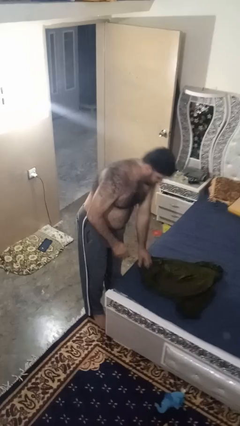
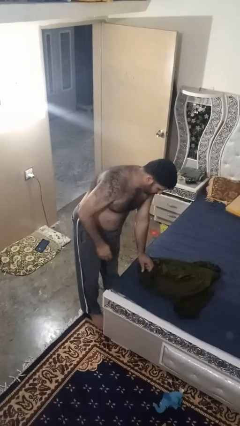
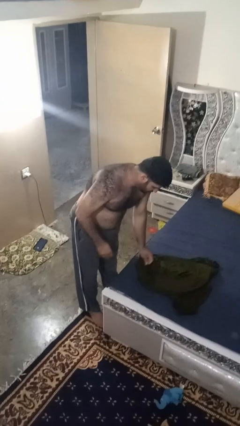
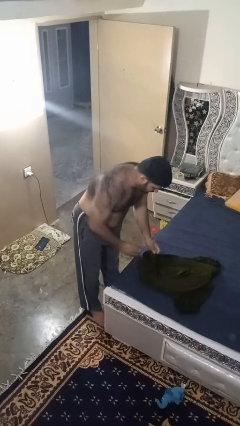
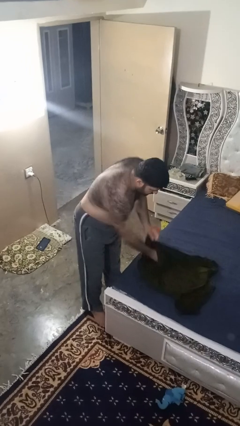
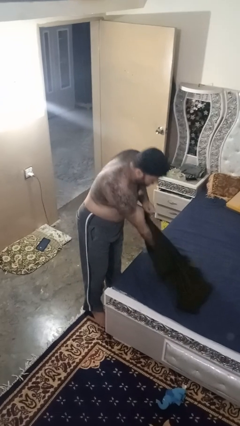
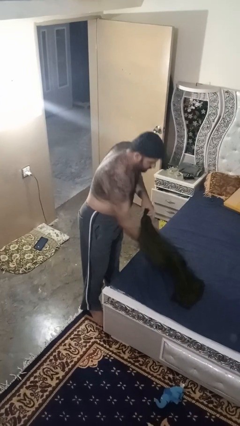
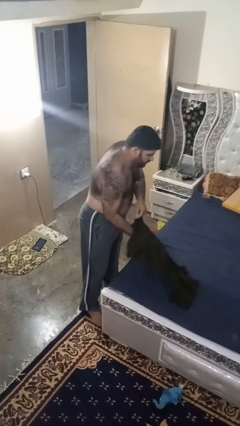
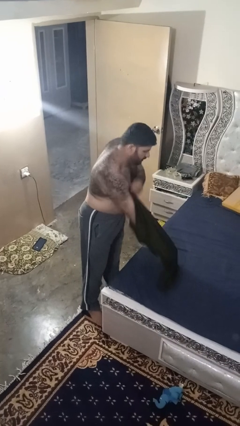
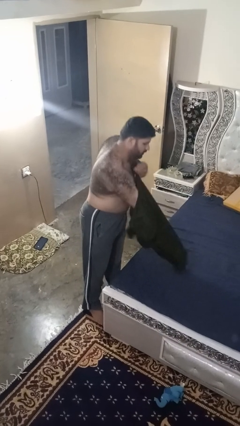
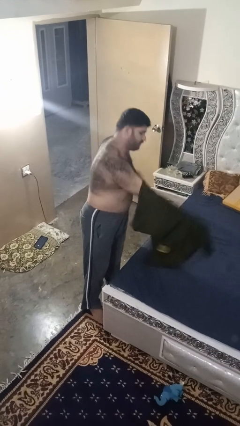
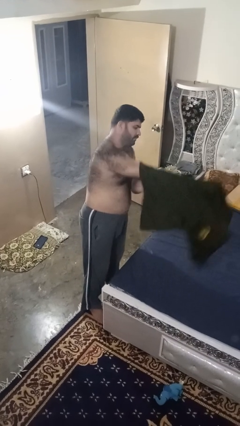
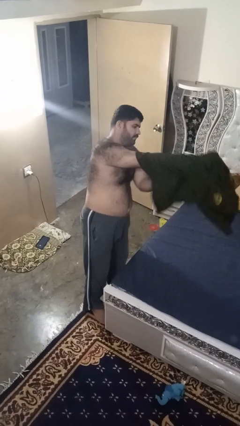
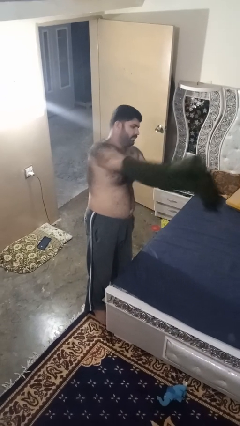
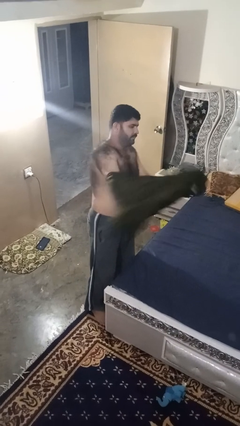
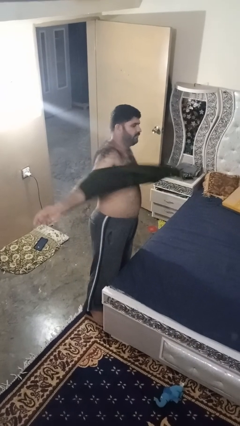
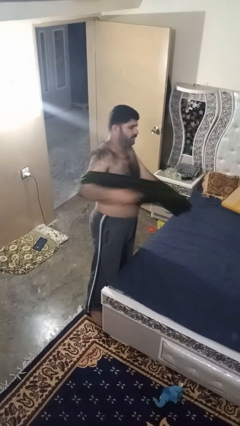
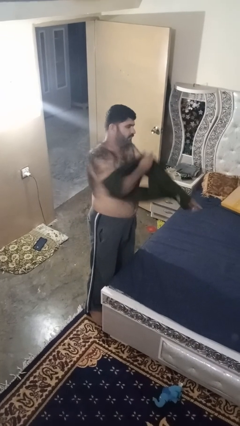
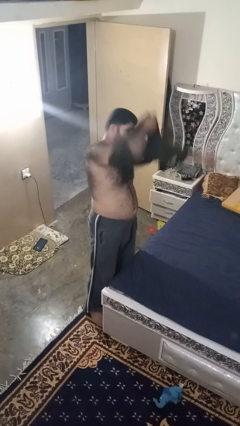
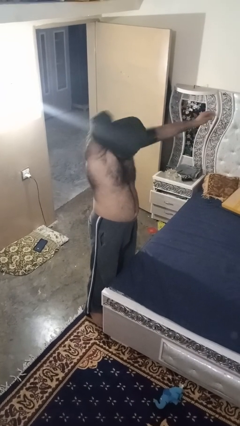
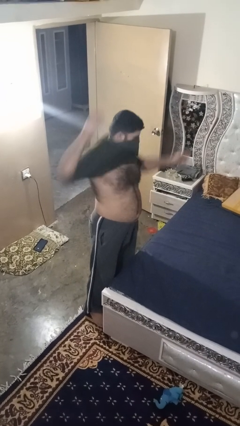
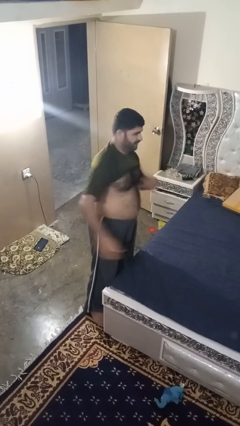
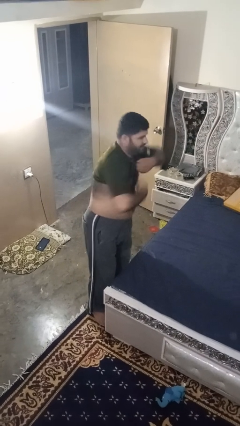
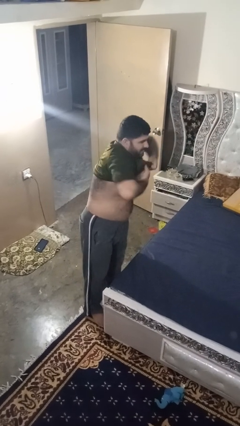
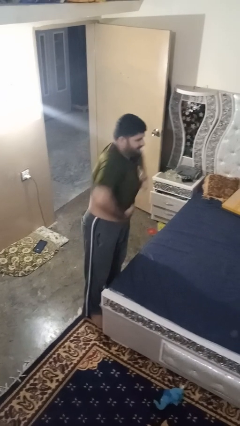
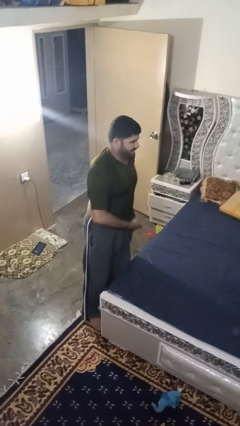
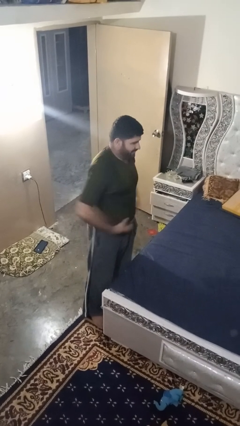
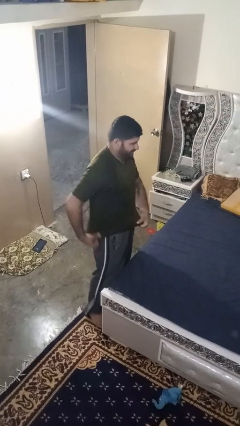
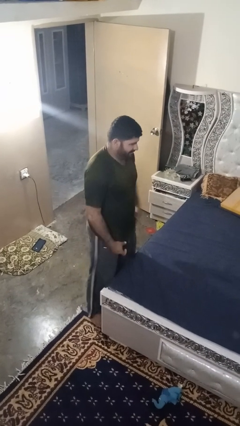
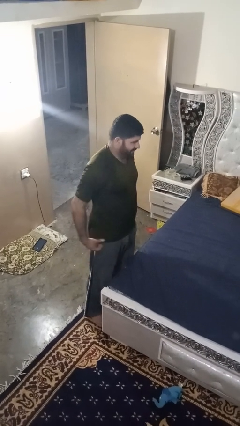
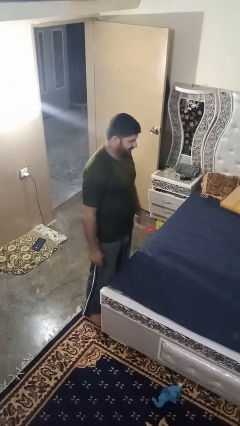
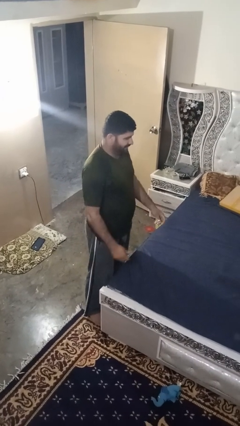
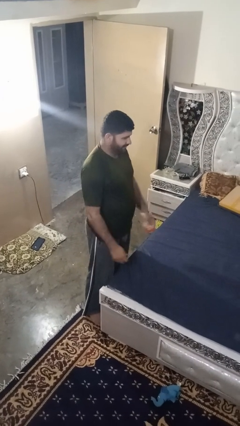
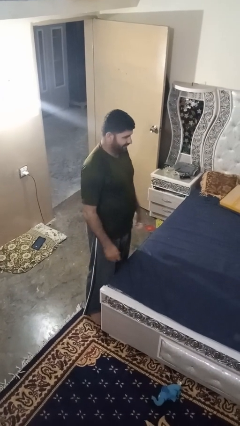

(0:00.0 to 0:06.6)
person puts on shirt

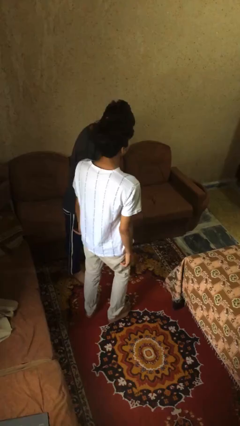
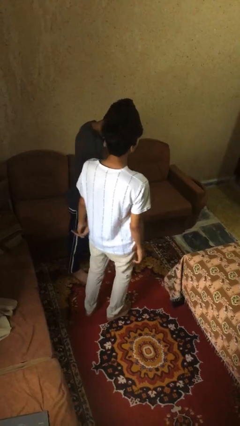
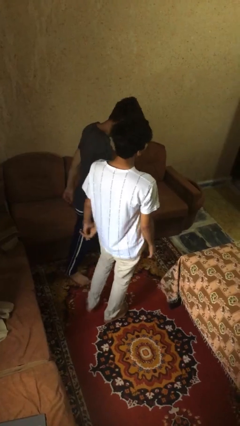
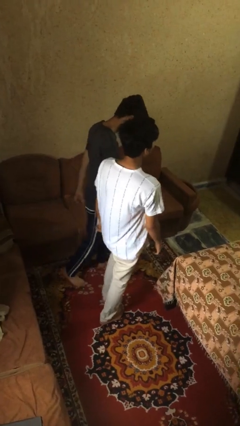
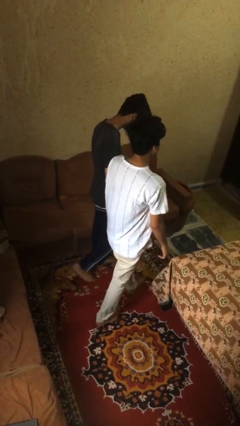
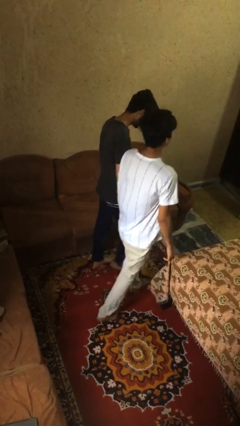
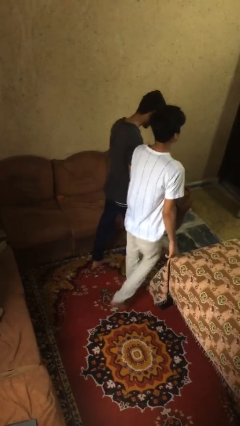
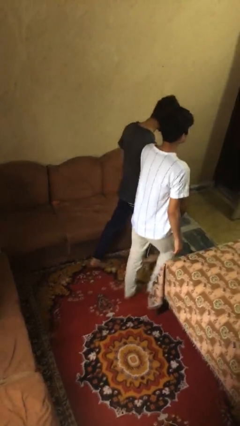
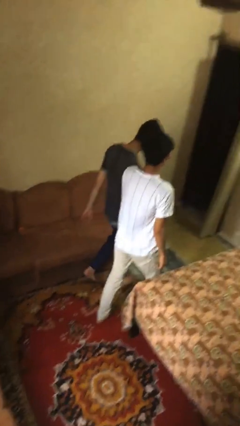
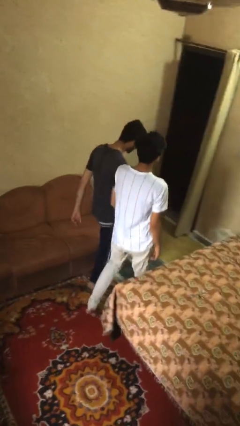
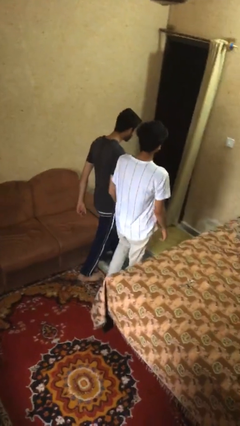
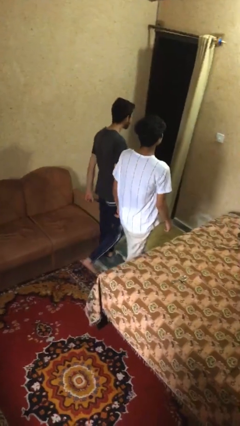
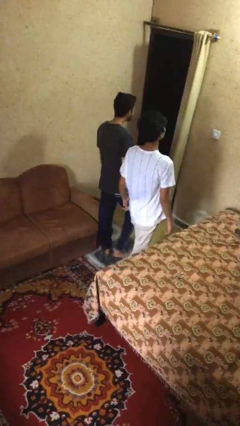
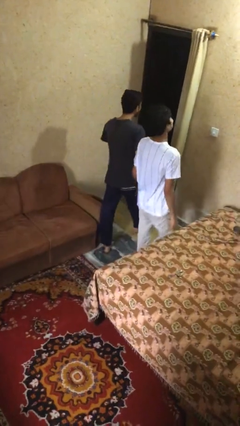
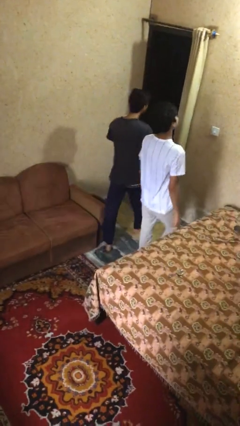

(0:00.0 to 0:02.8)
person holds hand

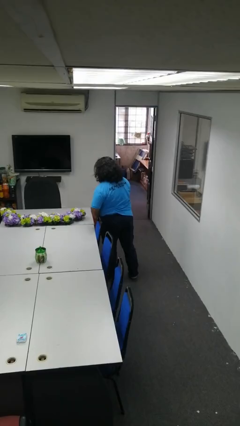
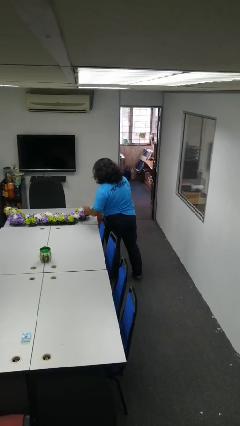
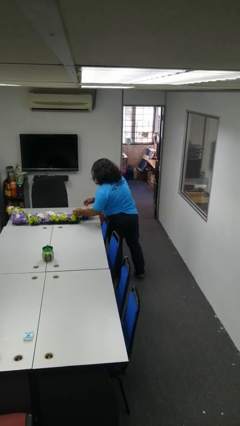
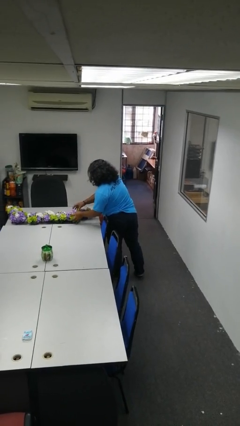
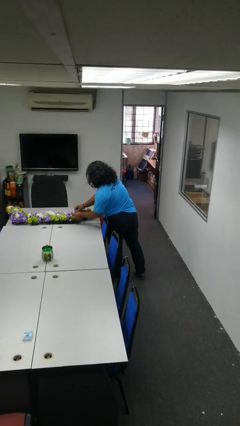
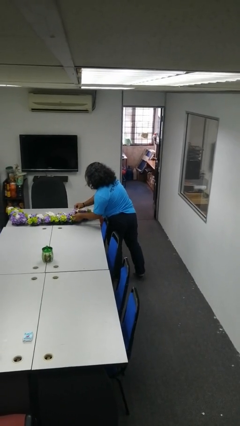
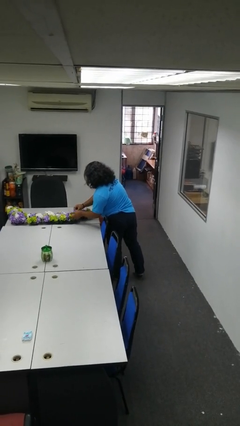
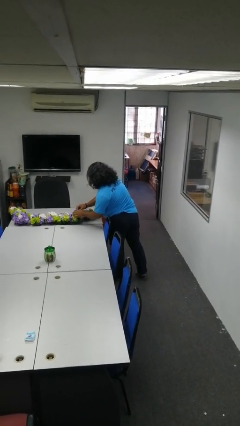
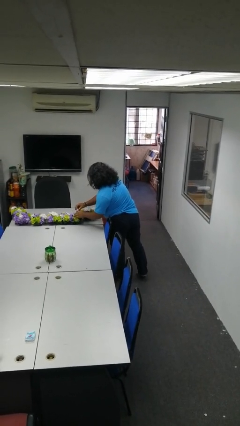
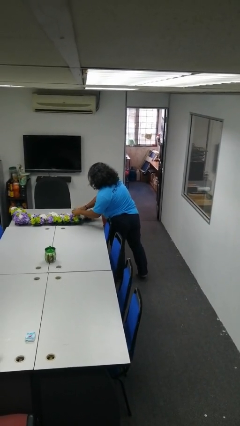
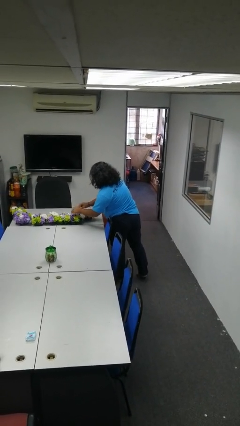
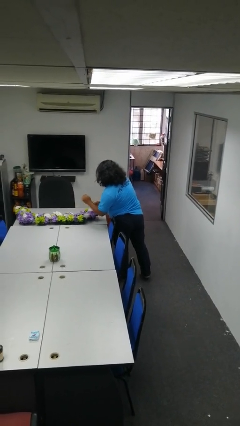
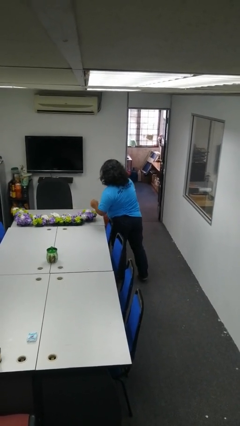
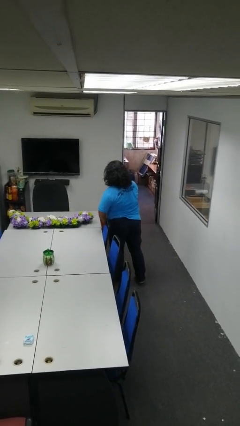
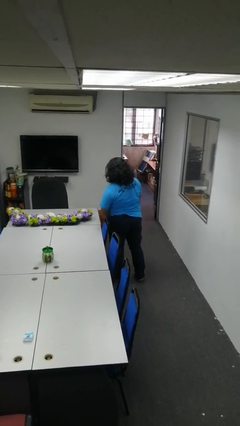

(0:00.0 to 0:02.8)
person arranges flowers in vase

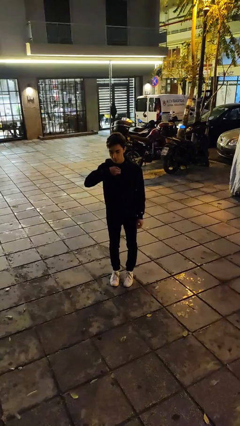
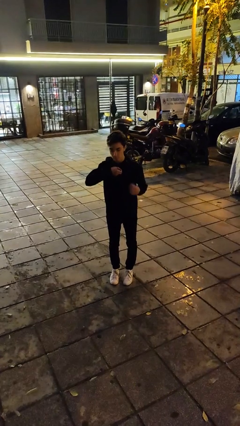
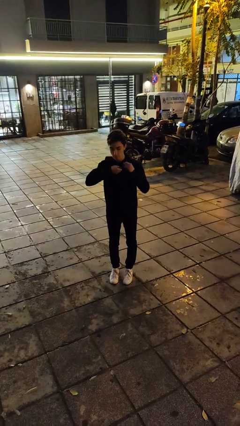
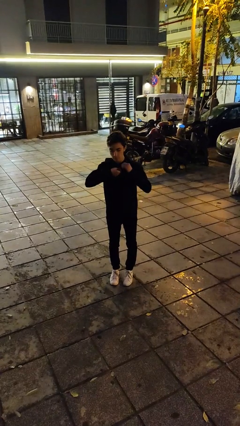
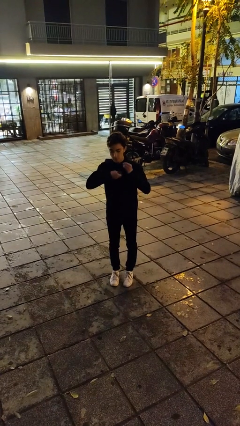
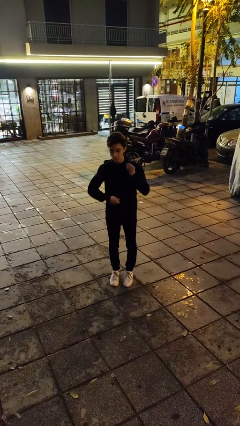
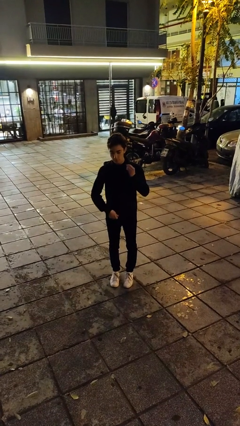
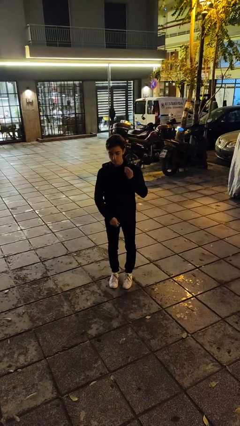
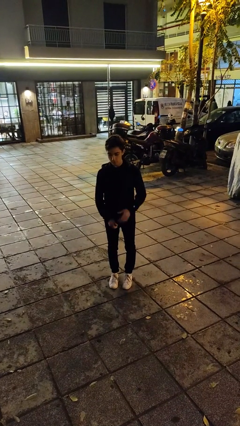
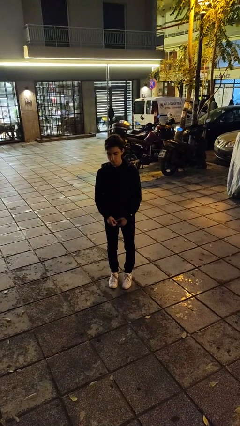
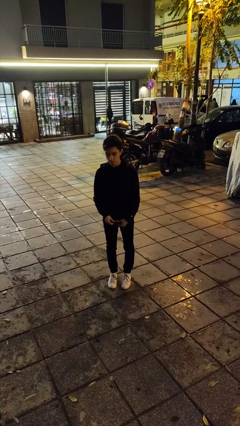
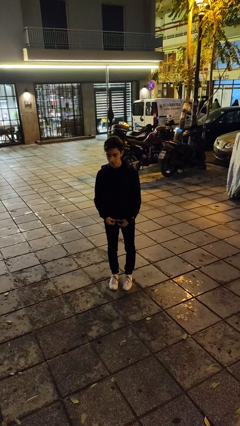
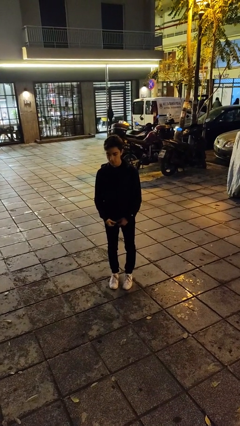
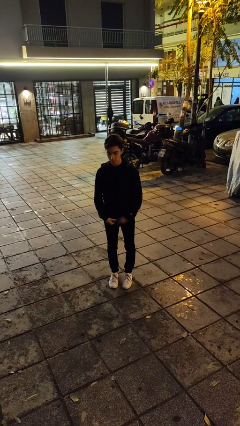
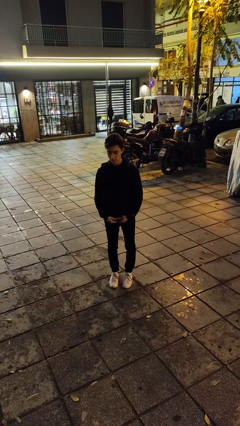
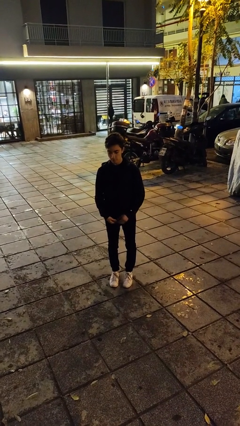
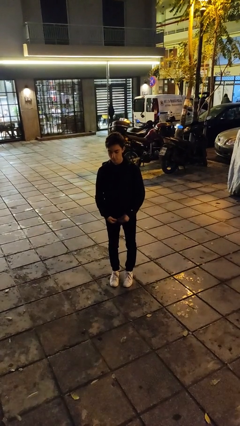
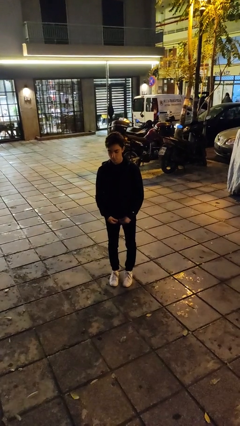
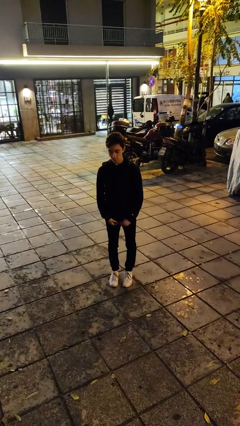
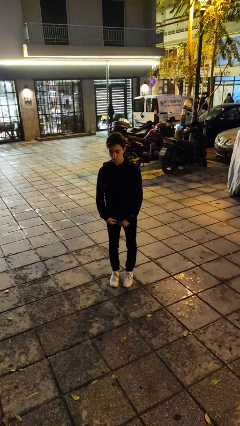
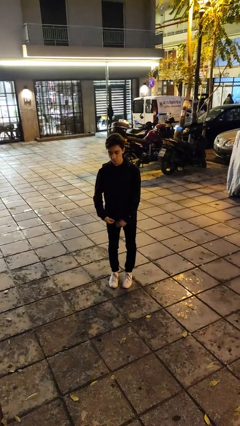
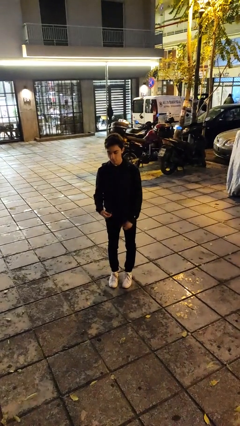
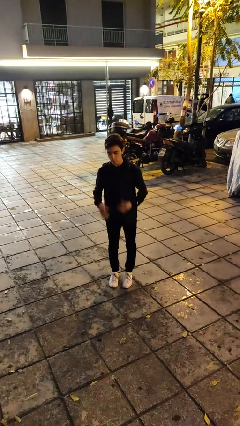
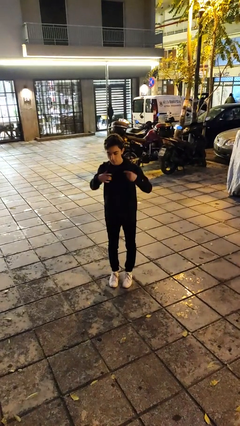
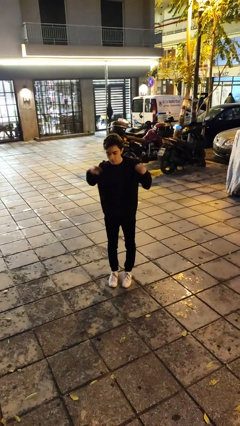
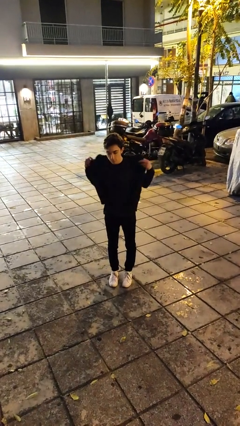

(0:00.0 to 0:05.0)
person unzips jacket

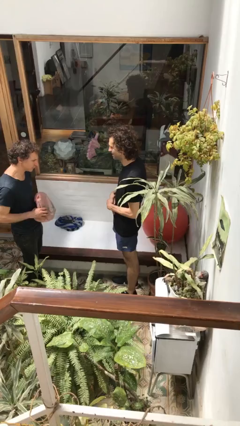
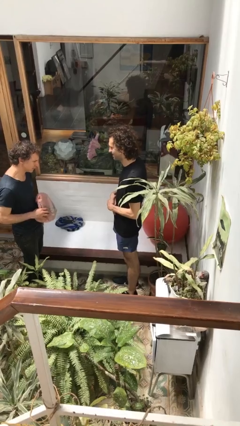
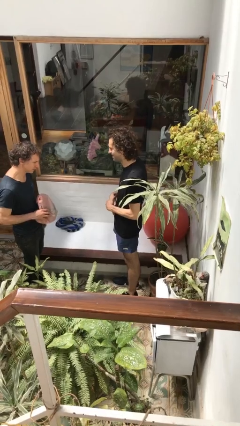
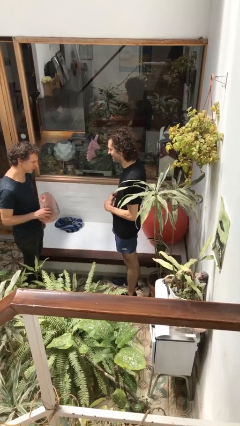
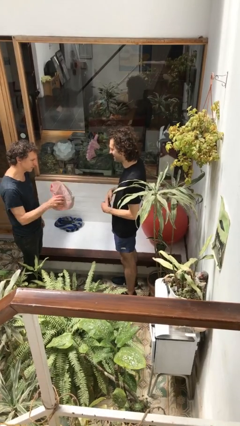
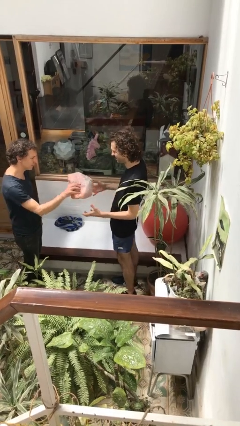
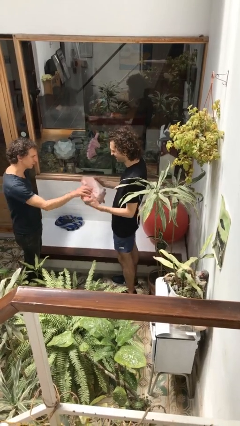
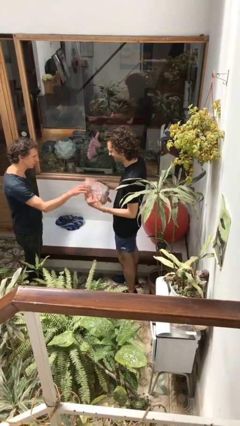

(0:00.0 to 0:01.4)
person transfers object to person
